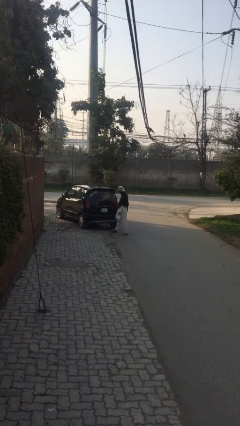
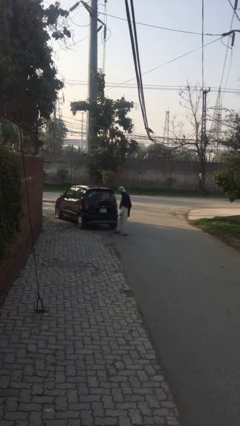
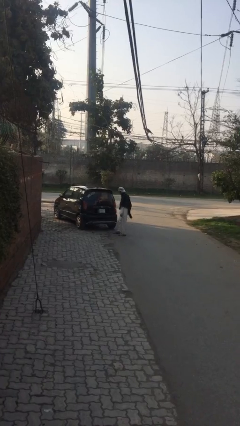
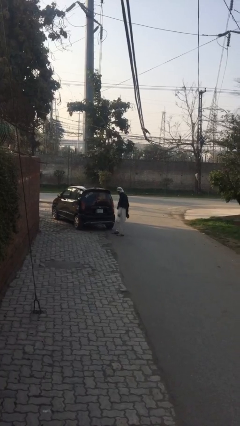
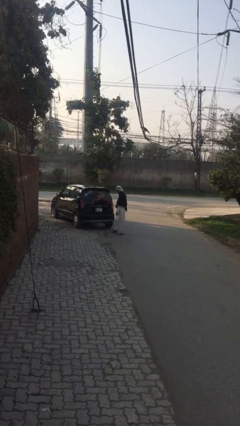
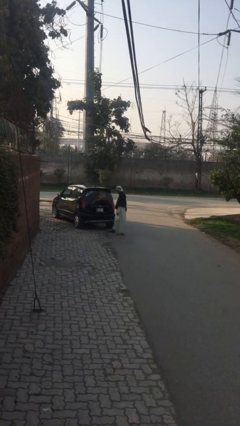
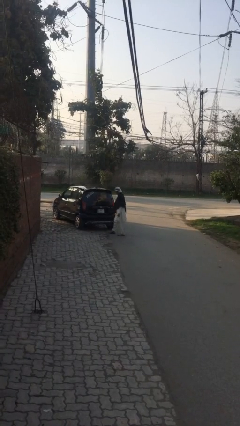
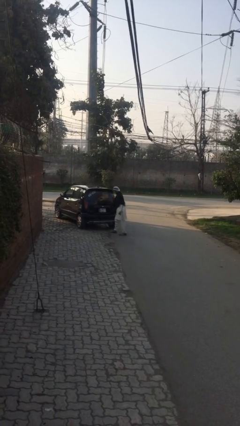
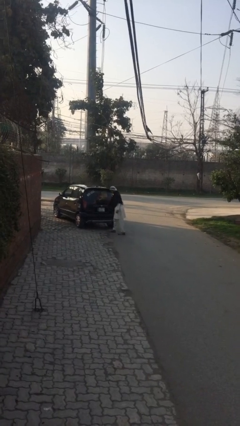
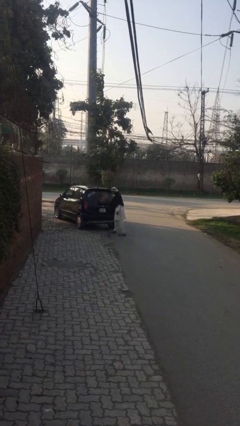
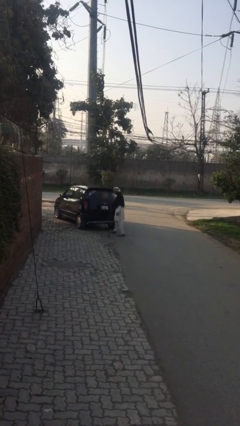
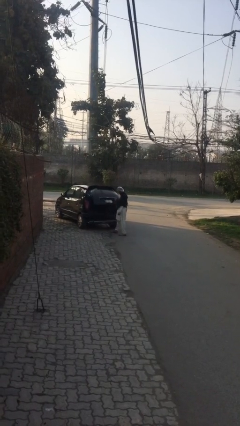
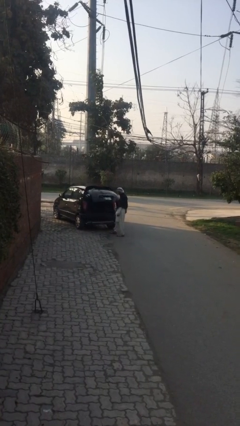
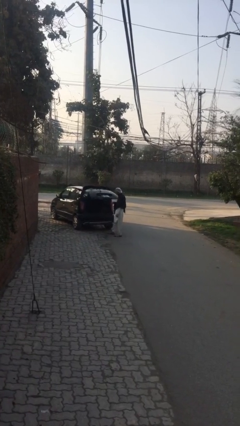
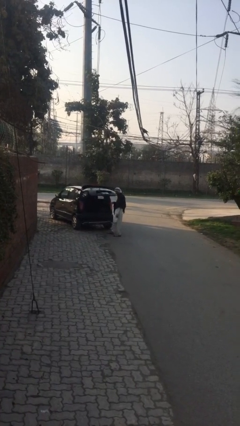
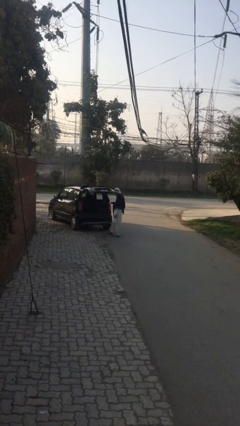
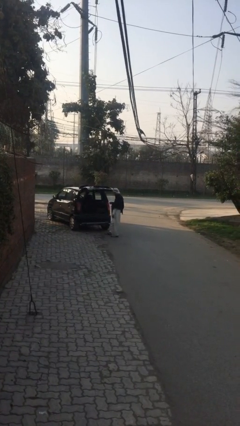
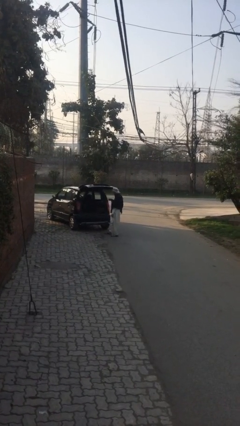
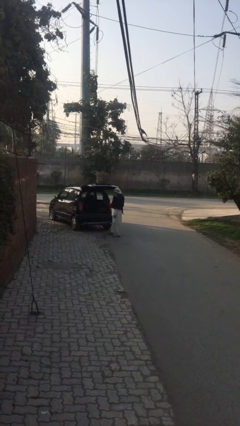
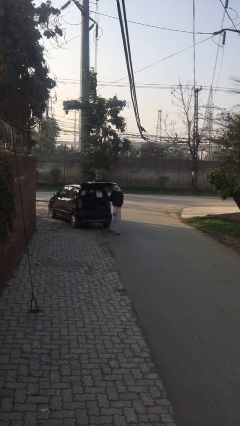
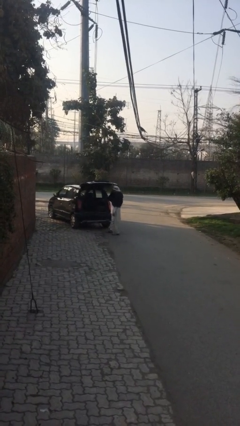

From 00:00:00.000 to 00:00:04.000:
person opens car trunk

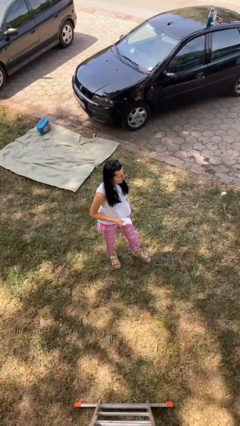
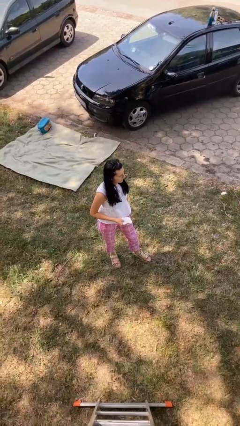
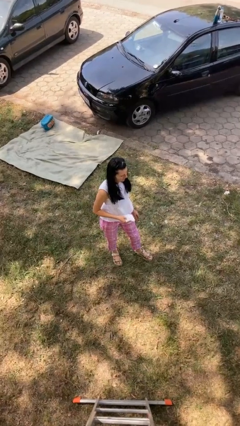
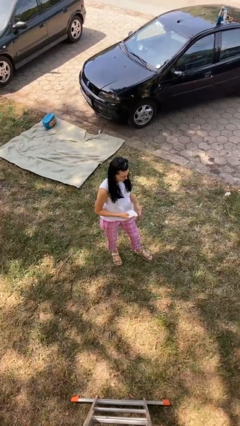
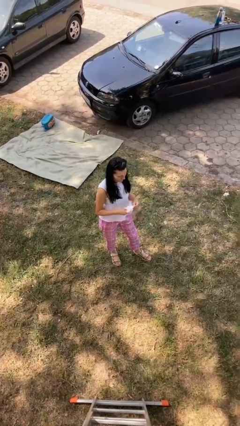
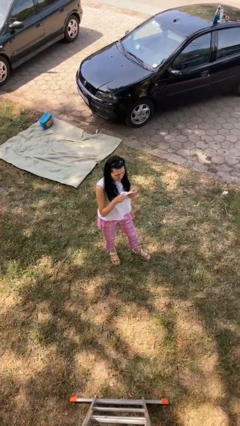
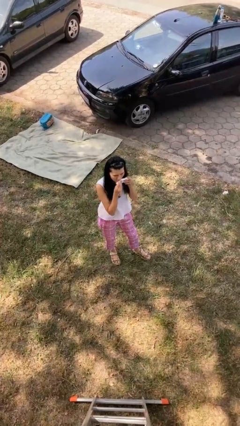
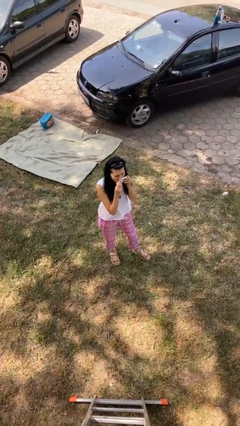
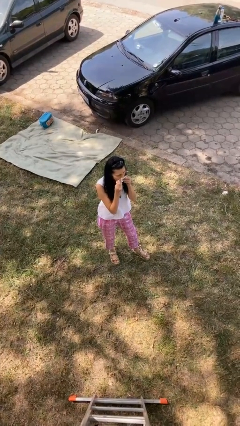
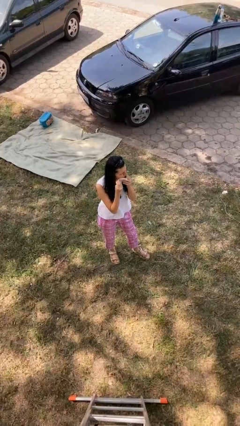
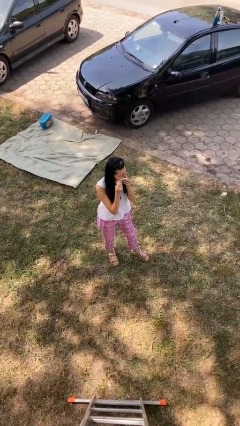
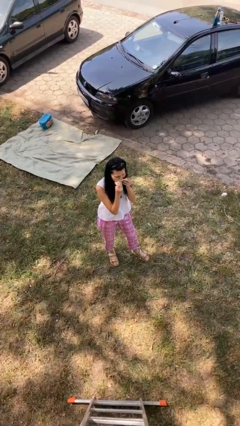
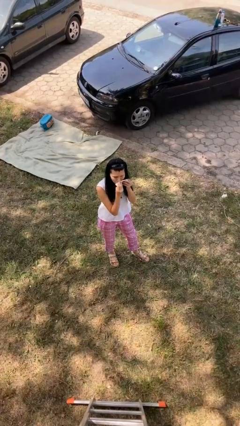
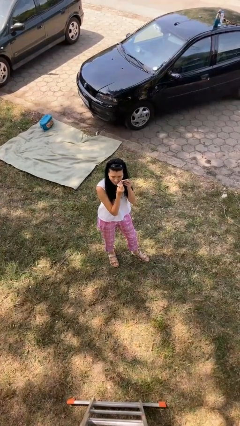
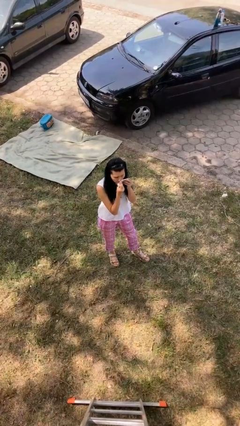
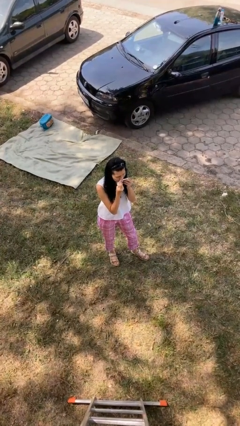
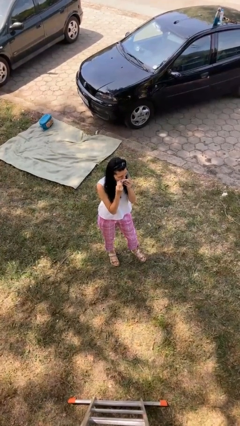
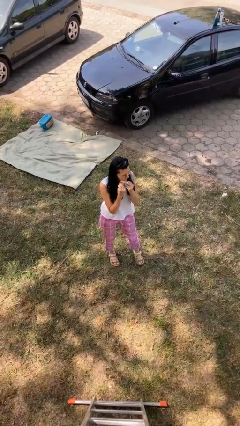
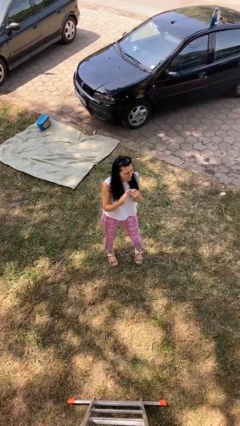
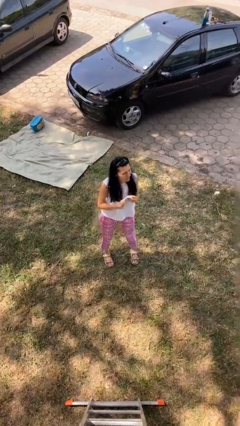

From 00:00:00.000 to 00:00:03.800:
person wipes mouth with napkin

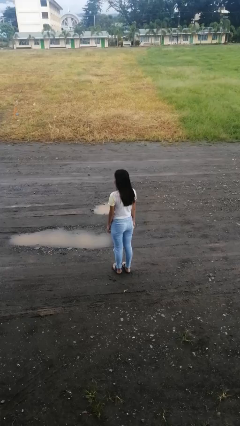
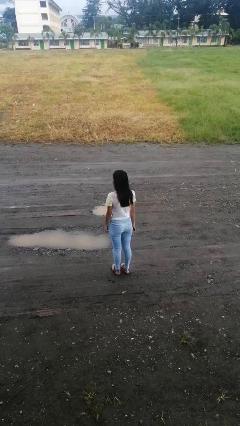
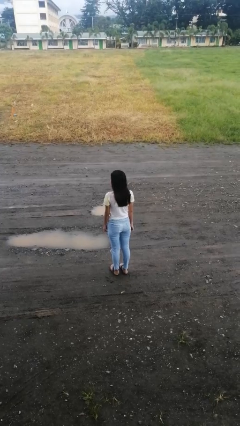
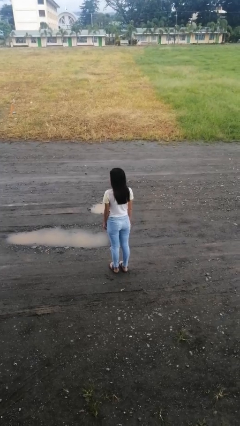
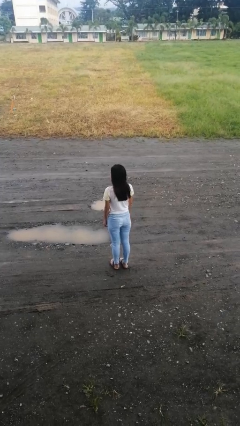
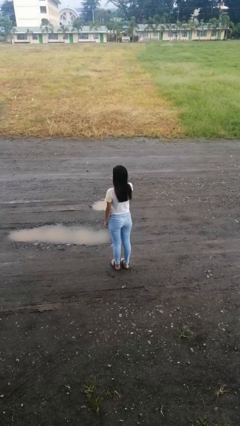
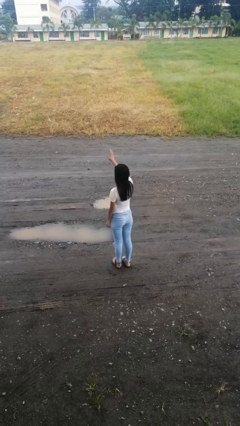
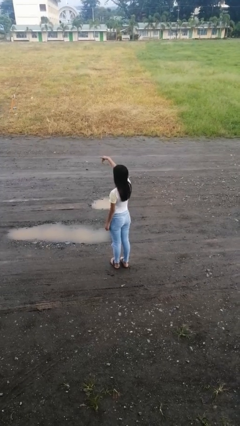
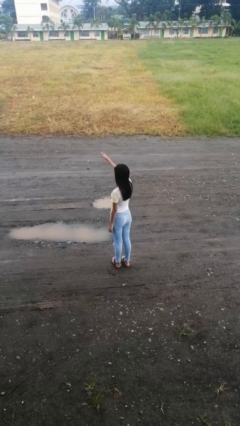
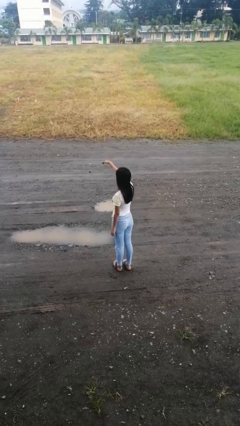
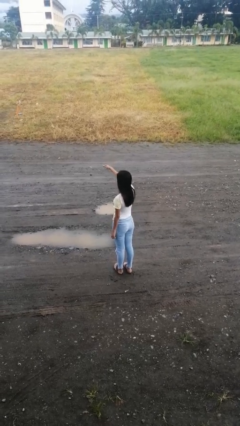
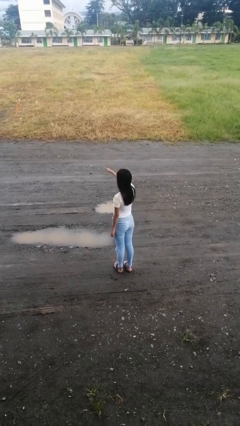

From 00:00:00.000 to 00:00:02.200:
person gestures come here

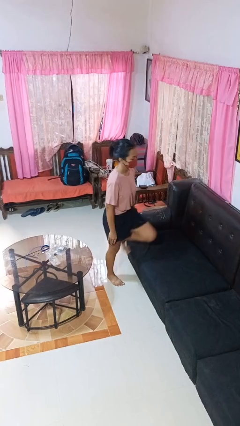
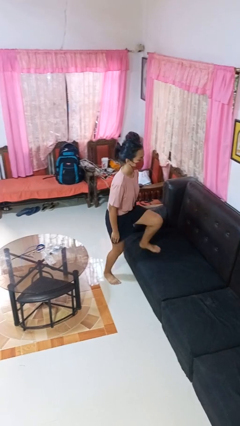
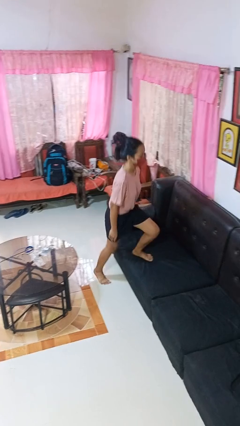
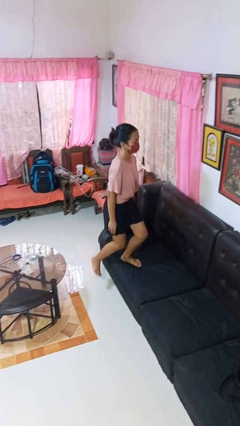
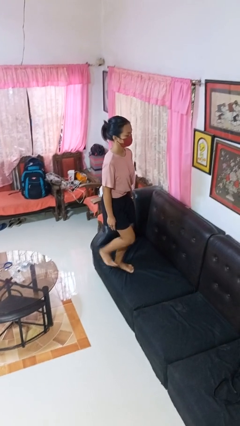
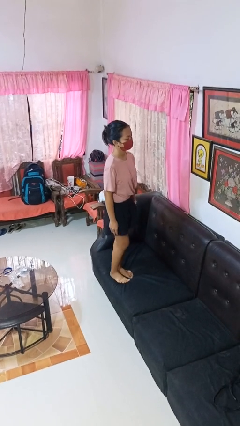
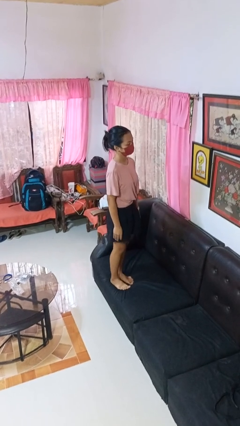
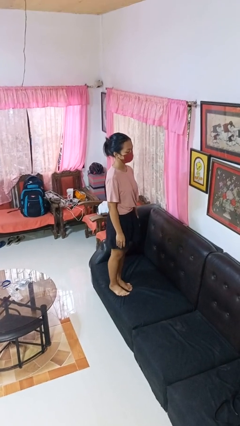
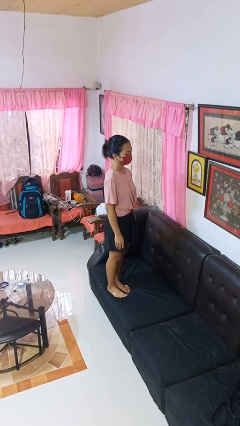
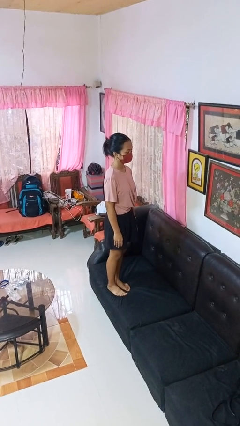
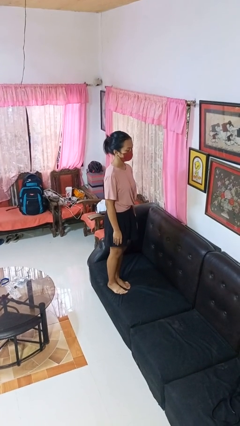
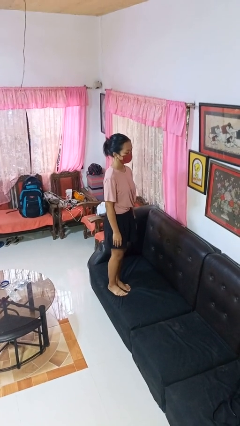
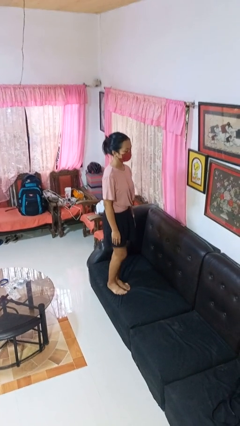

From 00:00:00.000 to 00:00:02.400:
person climbs on couch

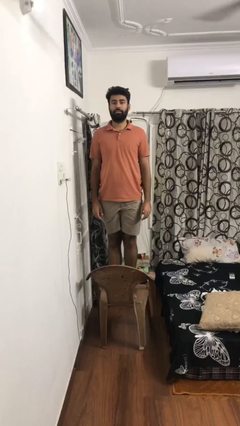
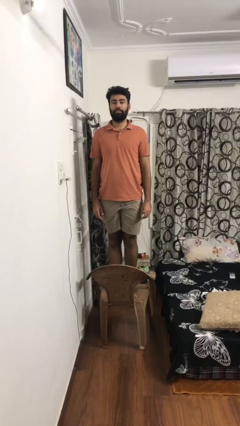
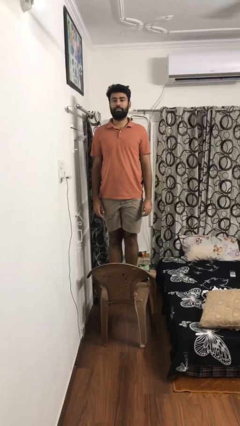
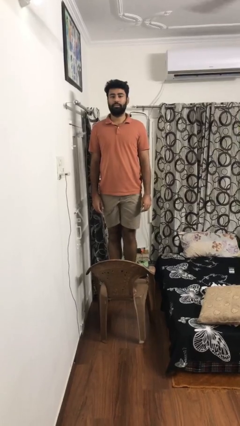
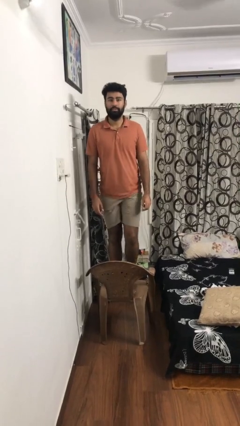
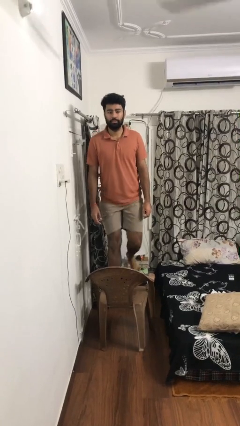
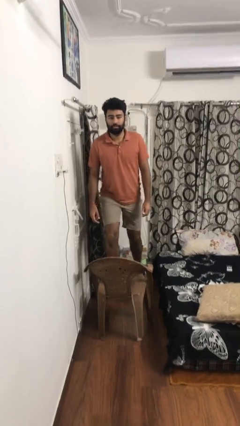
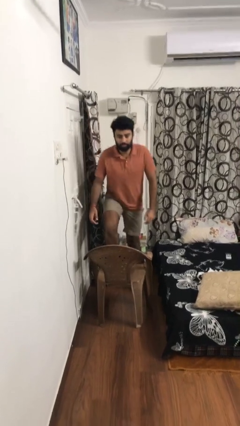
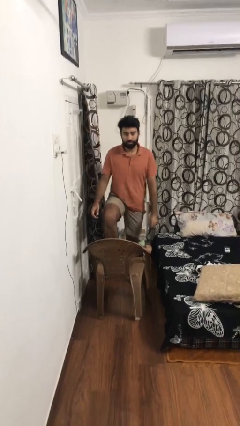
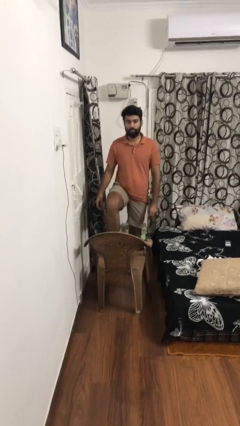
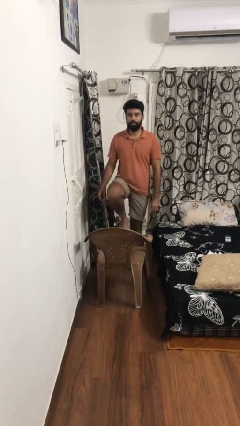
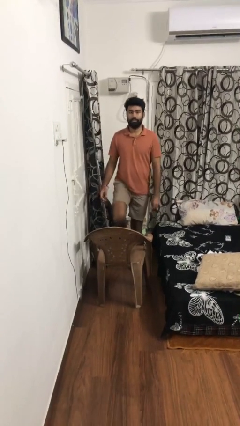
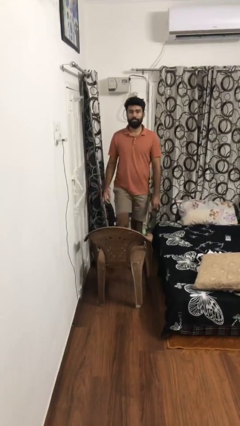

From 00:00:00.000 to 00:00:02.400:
person climbs off chair

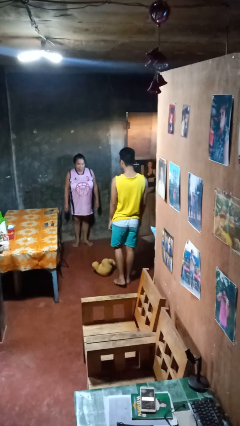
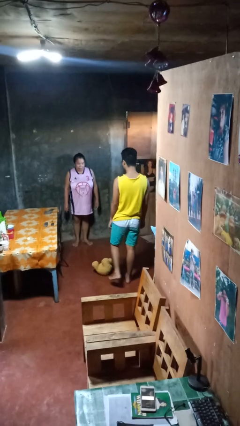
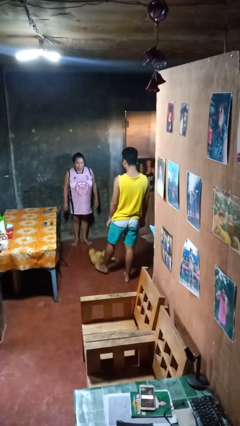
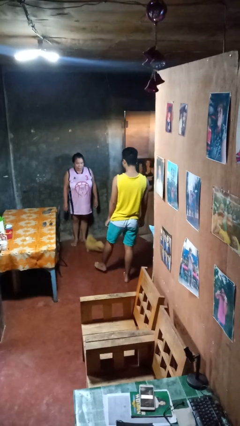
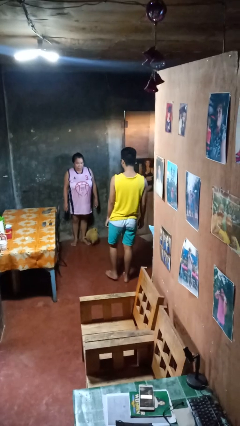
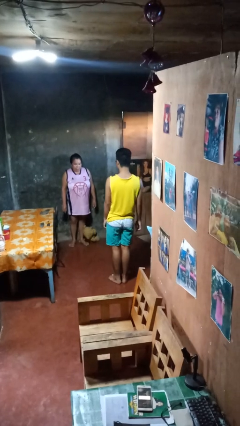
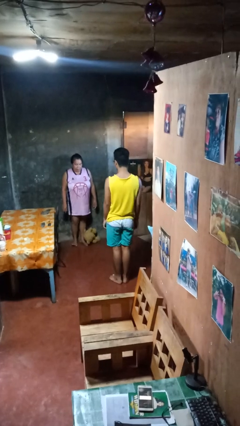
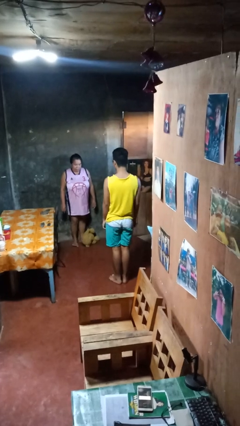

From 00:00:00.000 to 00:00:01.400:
person kicks object to person

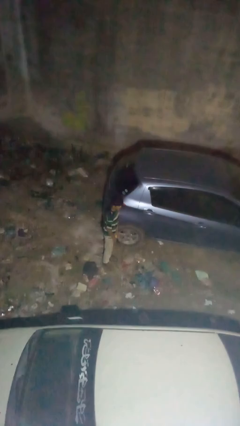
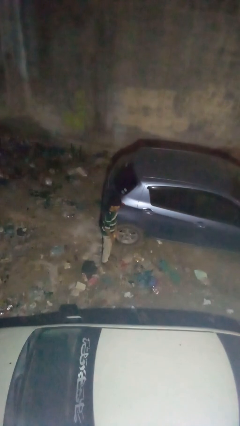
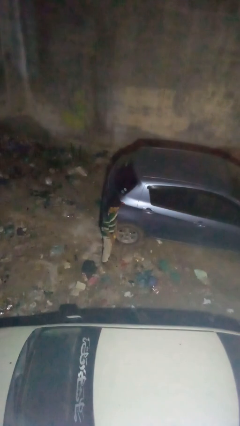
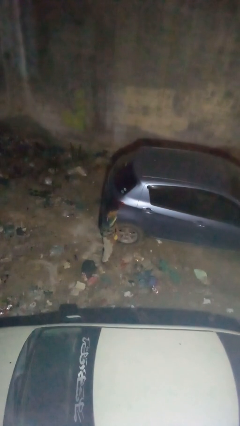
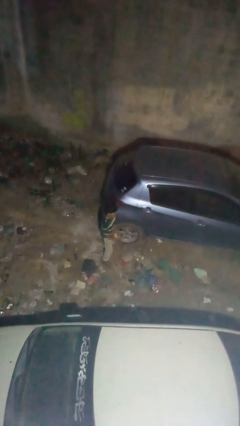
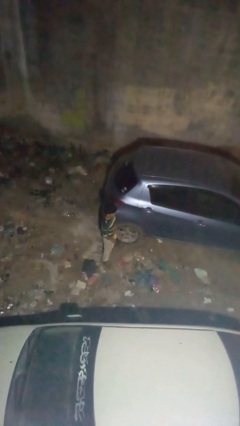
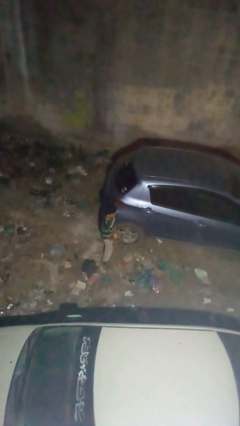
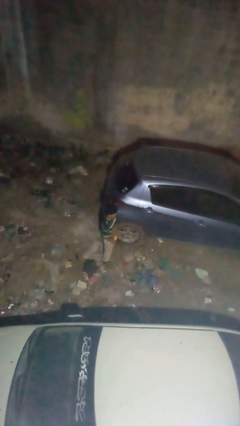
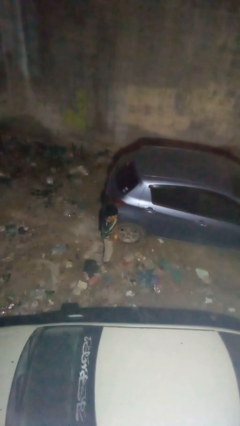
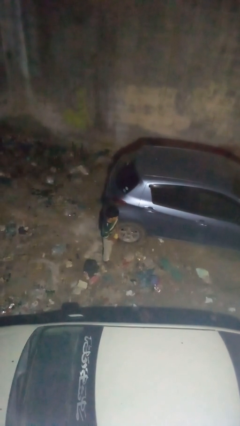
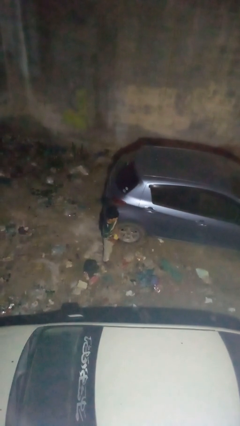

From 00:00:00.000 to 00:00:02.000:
person kicks car tires
